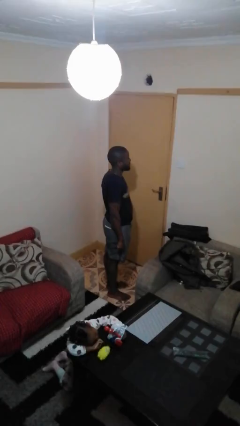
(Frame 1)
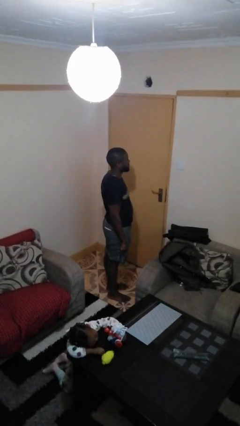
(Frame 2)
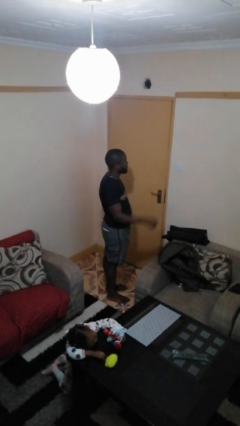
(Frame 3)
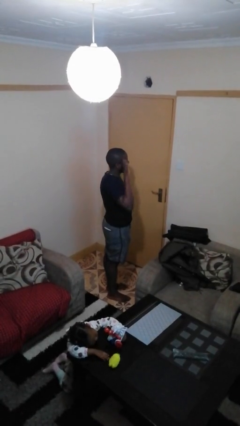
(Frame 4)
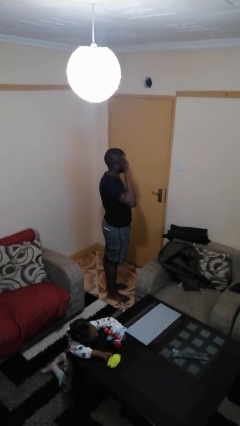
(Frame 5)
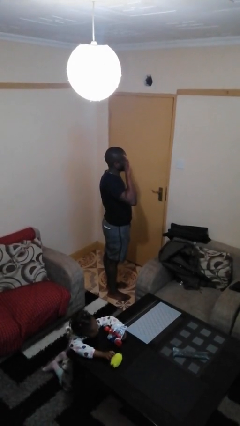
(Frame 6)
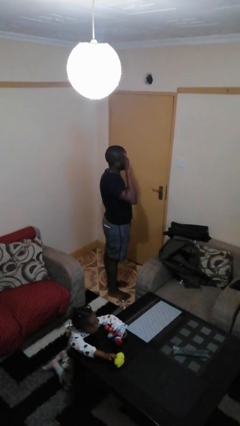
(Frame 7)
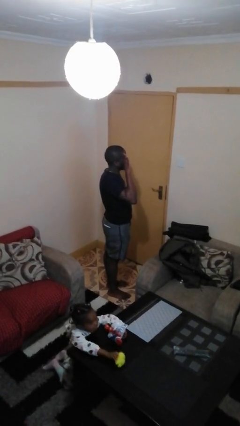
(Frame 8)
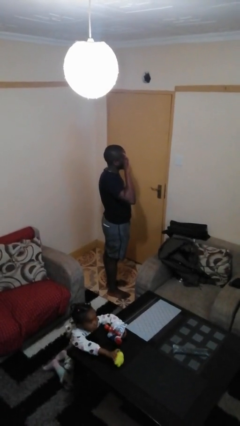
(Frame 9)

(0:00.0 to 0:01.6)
person salutes

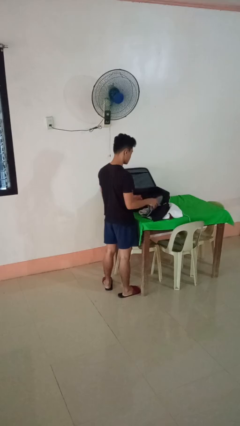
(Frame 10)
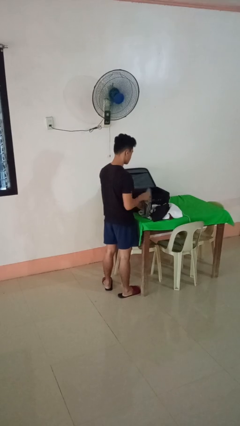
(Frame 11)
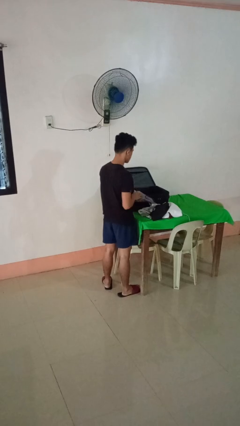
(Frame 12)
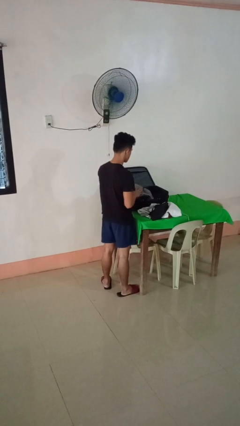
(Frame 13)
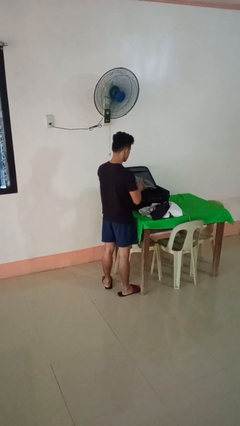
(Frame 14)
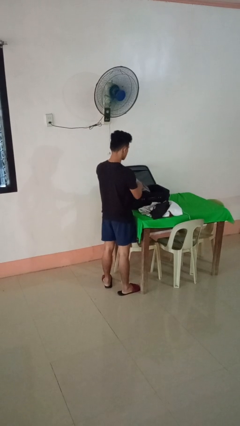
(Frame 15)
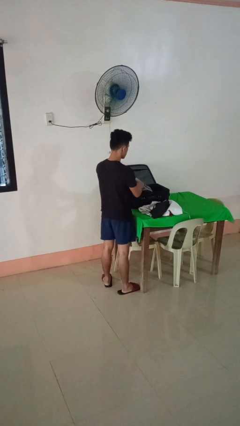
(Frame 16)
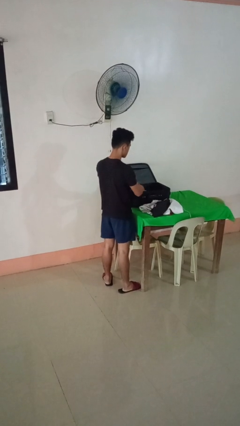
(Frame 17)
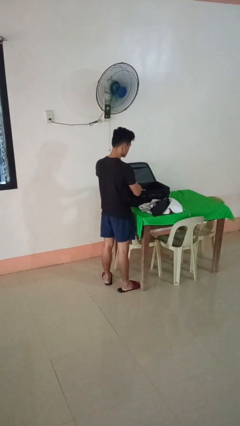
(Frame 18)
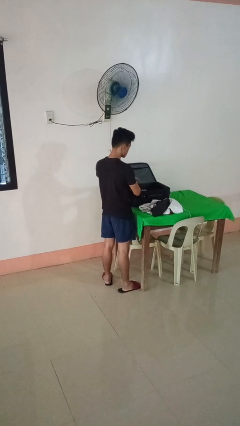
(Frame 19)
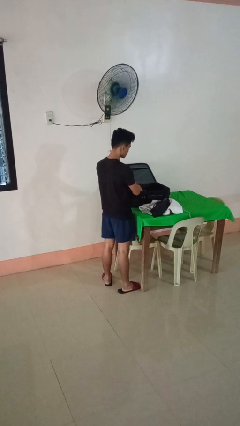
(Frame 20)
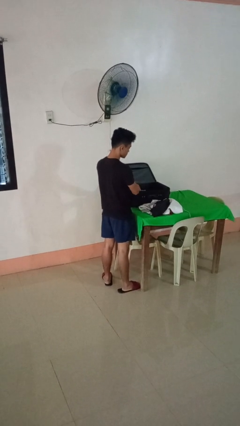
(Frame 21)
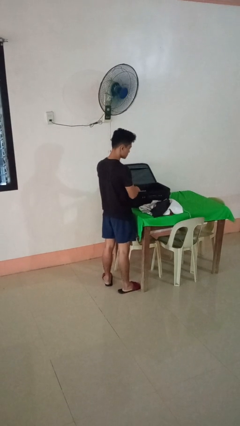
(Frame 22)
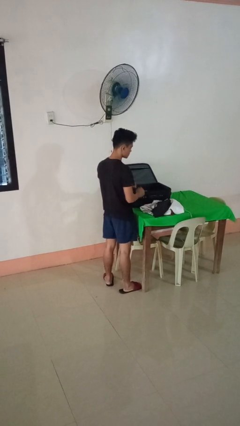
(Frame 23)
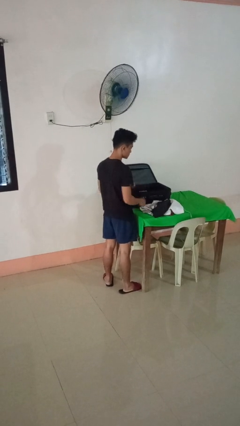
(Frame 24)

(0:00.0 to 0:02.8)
person loads clothes into suitcase

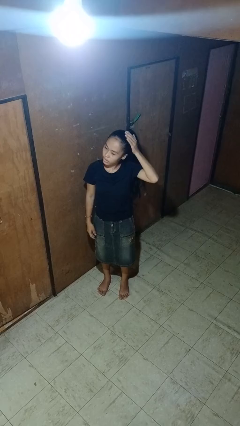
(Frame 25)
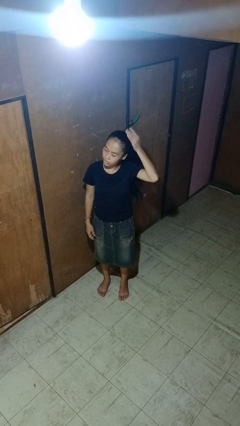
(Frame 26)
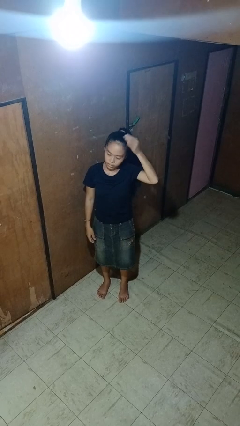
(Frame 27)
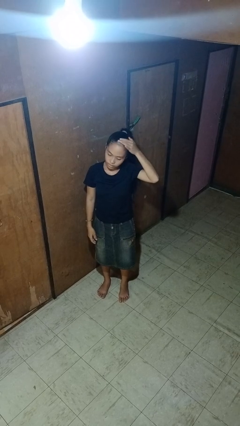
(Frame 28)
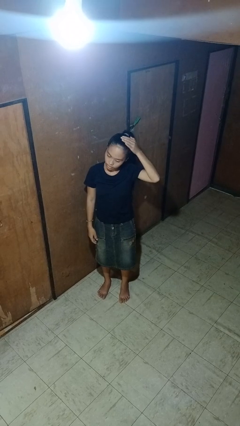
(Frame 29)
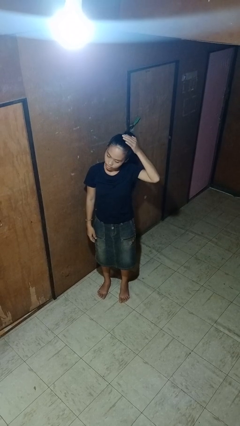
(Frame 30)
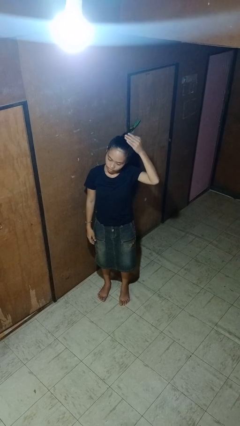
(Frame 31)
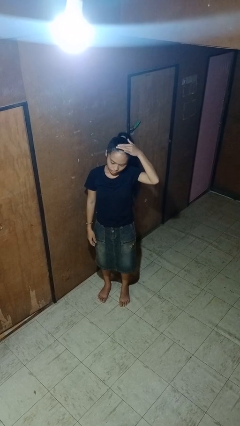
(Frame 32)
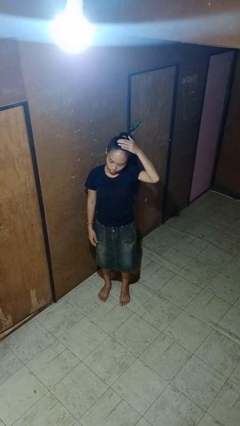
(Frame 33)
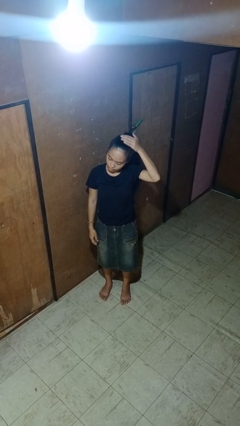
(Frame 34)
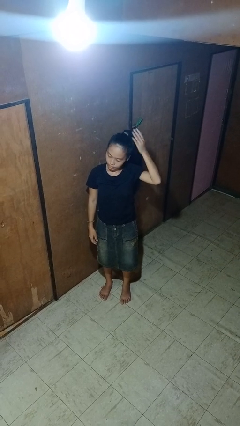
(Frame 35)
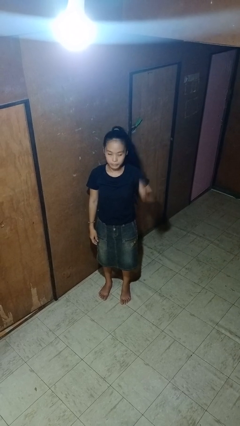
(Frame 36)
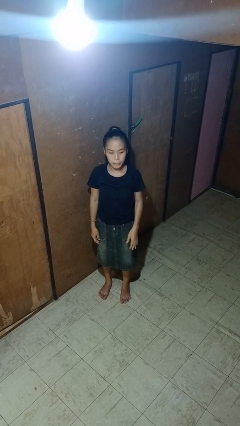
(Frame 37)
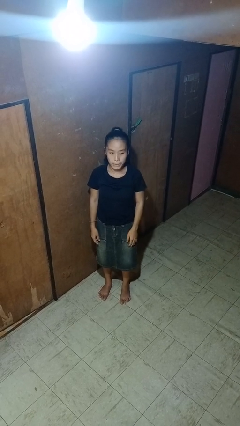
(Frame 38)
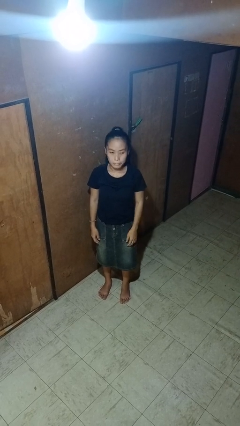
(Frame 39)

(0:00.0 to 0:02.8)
person strokes hair

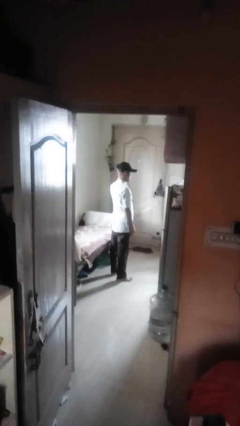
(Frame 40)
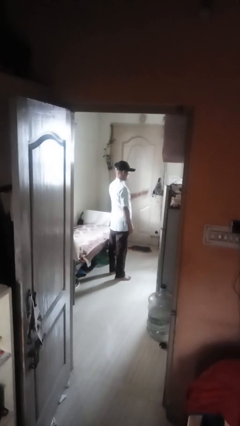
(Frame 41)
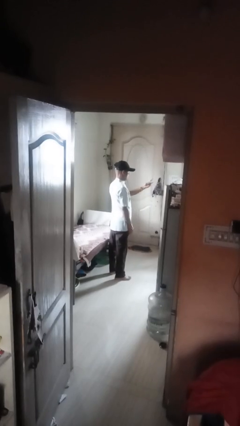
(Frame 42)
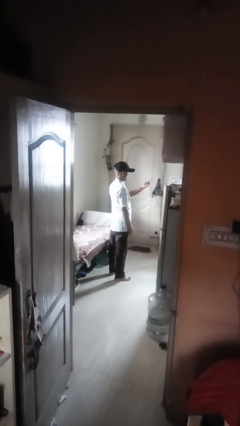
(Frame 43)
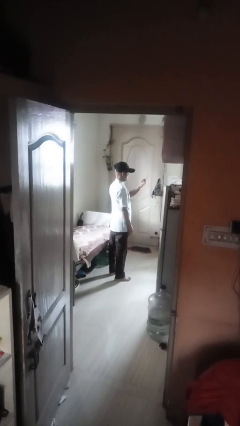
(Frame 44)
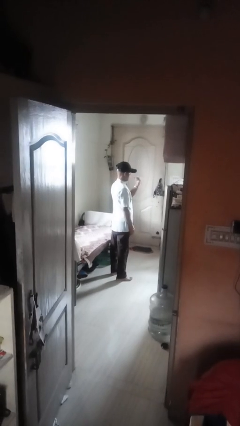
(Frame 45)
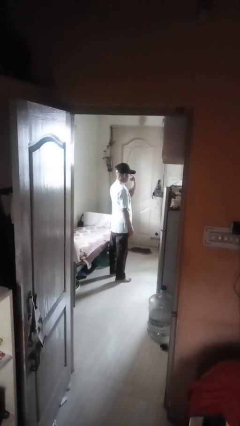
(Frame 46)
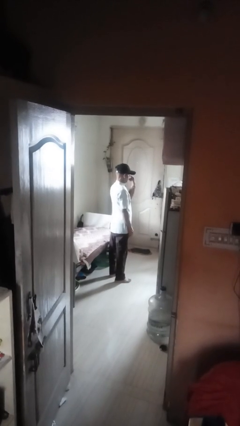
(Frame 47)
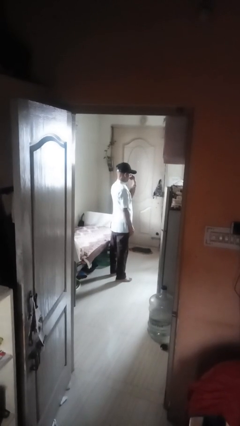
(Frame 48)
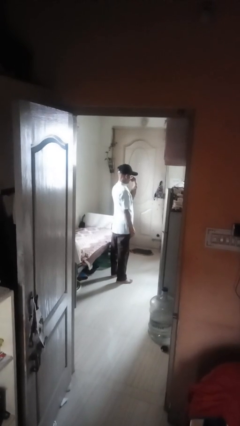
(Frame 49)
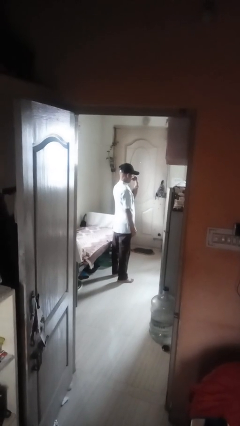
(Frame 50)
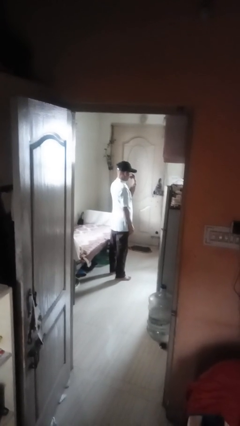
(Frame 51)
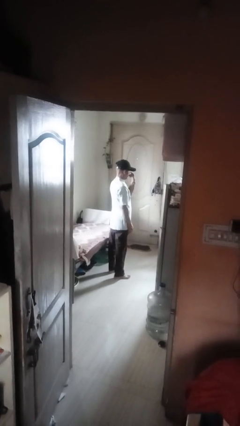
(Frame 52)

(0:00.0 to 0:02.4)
person gestures watch closely

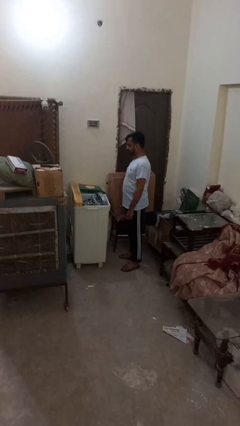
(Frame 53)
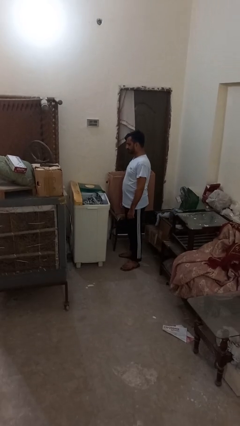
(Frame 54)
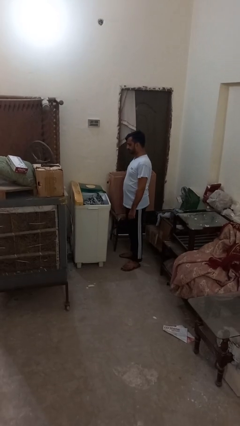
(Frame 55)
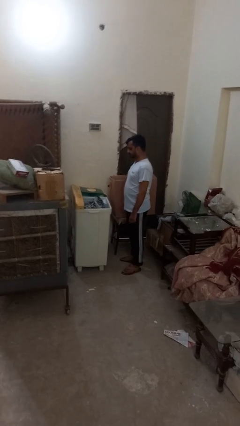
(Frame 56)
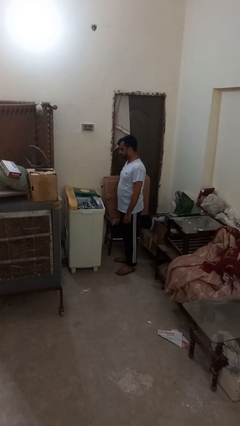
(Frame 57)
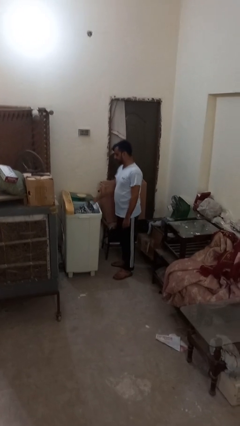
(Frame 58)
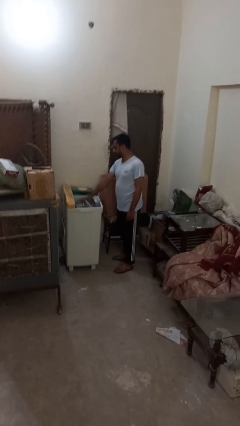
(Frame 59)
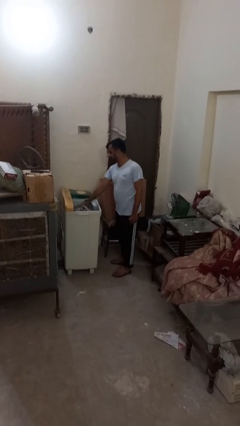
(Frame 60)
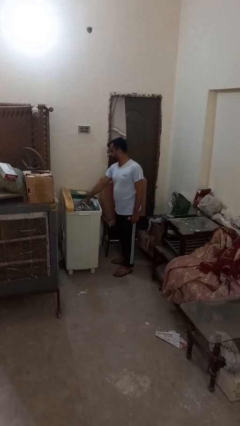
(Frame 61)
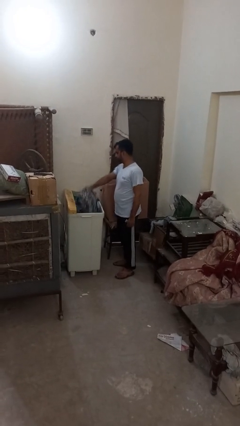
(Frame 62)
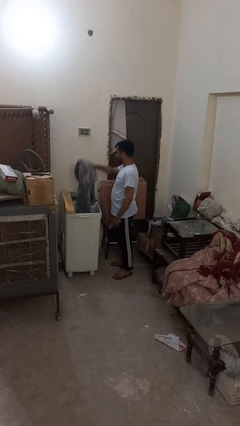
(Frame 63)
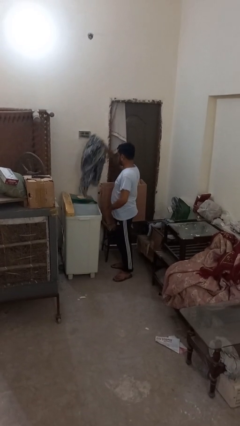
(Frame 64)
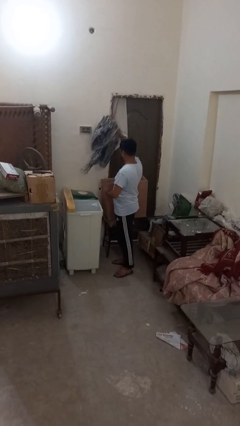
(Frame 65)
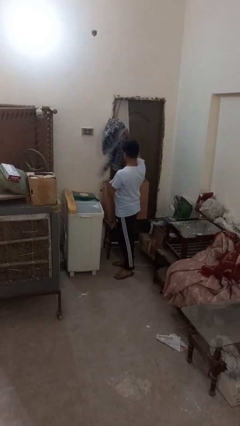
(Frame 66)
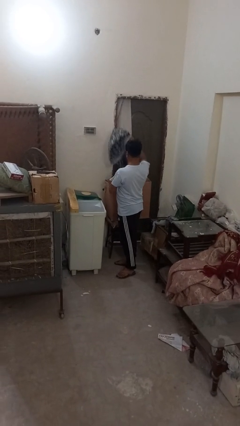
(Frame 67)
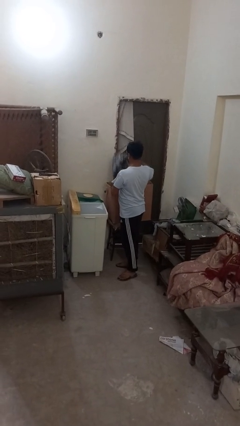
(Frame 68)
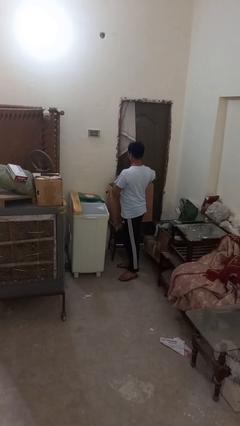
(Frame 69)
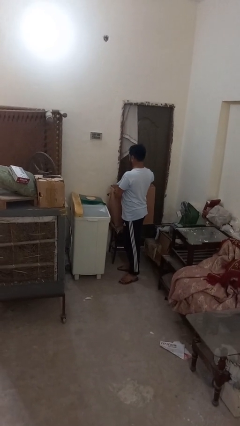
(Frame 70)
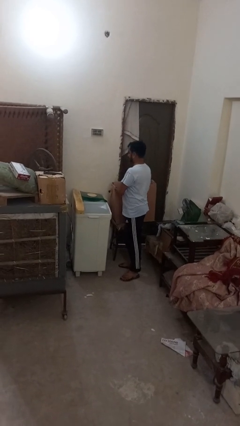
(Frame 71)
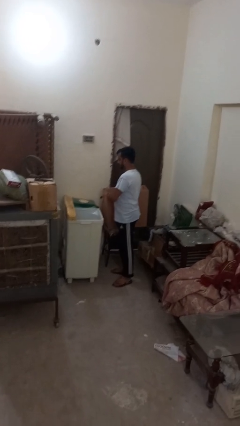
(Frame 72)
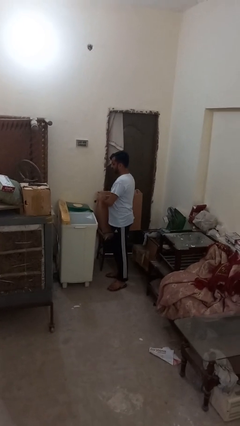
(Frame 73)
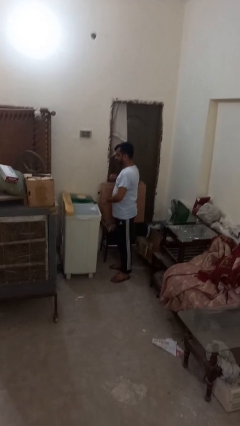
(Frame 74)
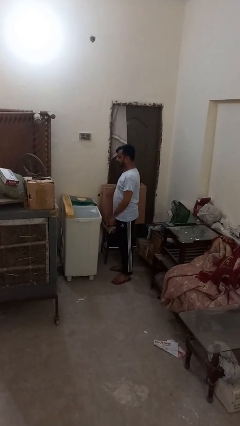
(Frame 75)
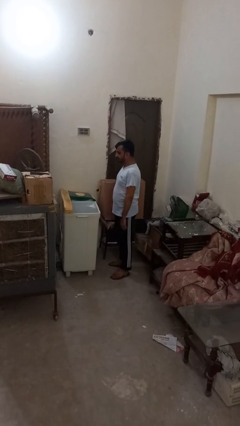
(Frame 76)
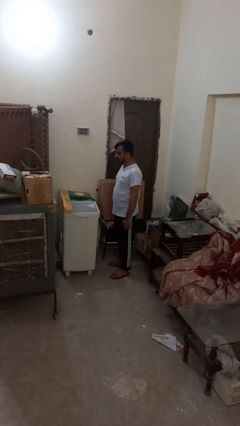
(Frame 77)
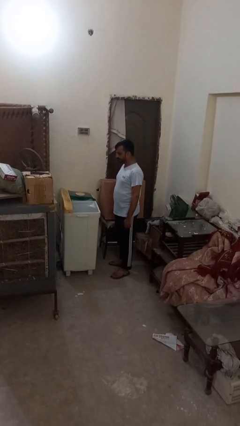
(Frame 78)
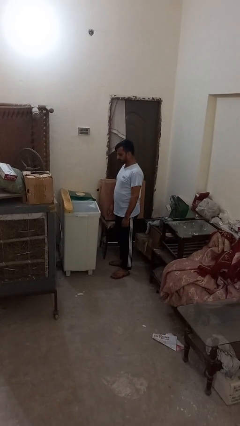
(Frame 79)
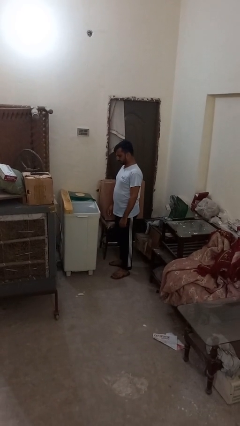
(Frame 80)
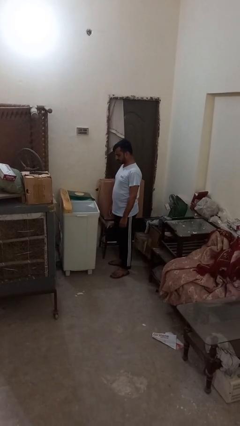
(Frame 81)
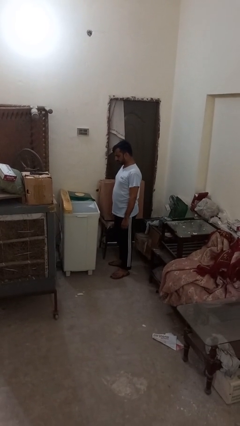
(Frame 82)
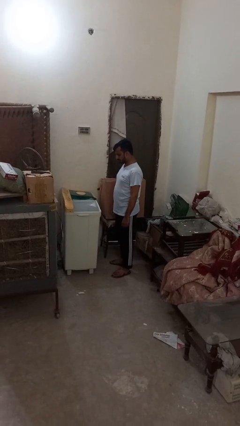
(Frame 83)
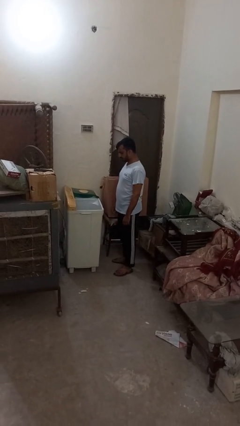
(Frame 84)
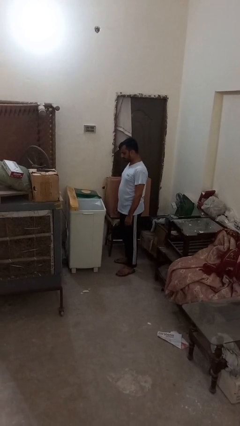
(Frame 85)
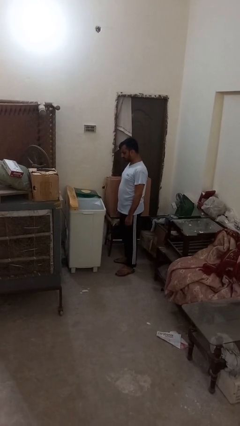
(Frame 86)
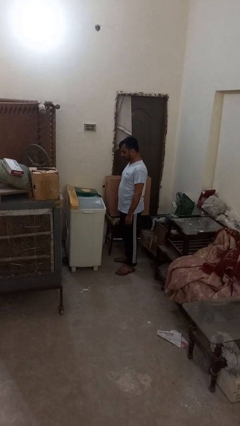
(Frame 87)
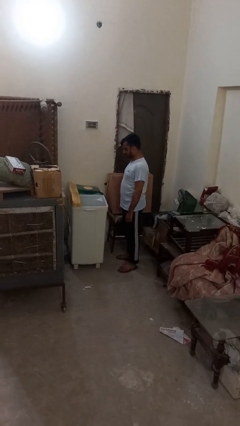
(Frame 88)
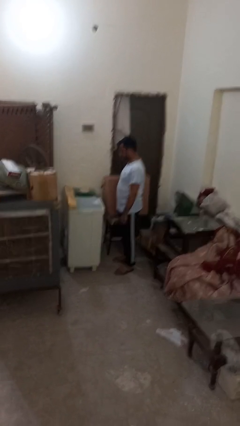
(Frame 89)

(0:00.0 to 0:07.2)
person unloads dryer

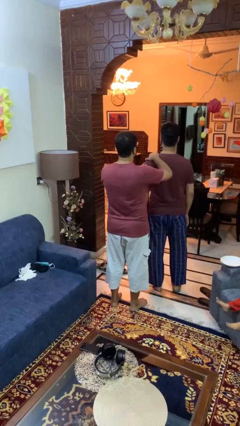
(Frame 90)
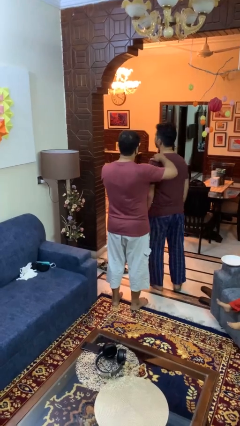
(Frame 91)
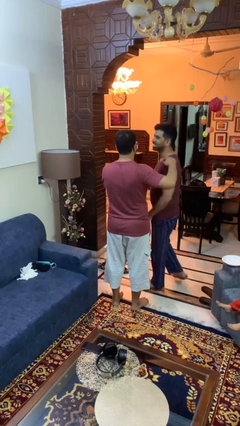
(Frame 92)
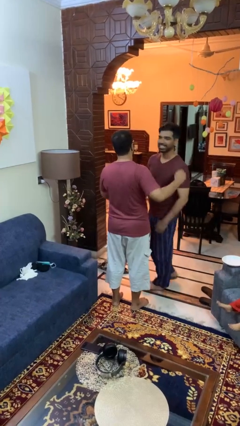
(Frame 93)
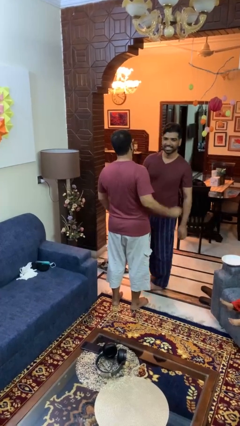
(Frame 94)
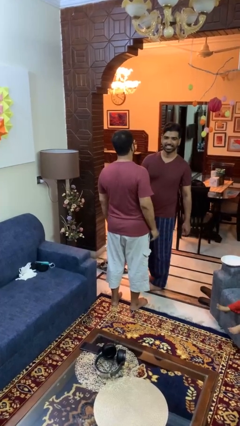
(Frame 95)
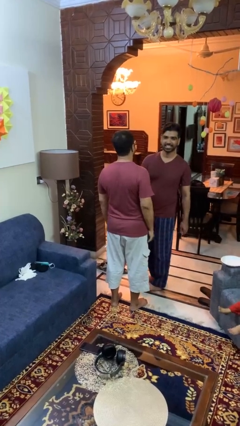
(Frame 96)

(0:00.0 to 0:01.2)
person spins person around
